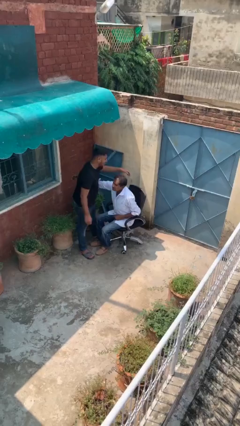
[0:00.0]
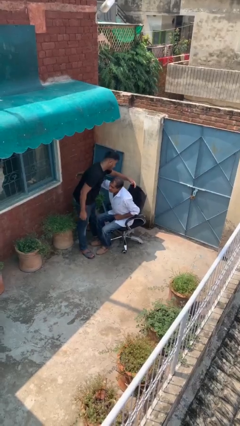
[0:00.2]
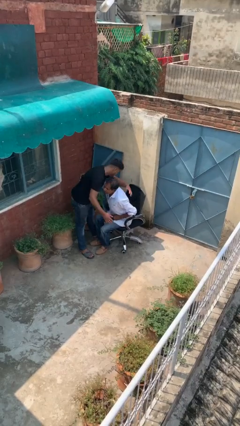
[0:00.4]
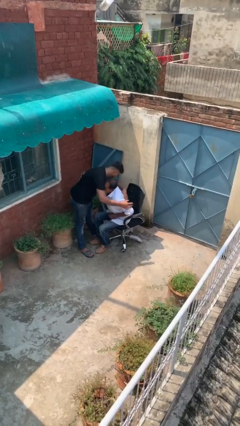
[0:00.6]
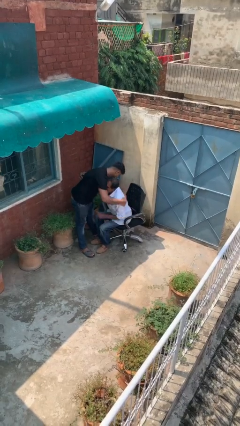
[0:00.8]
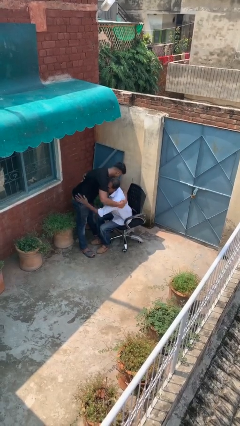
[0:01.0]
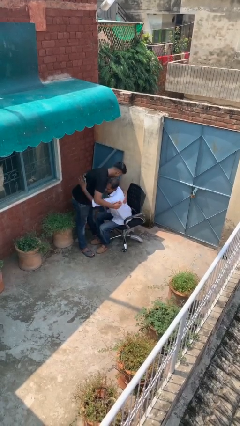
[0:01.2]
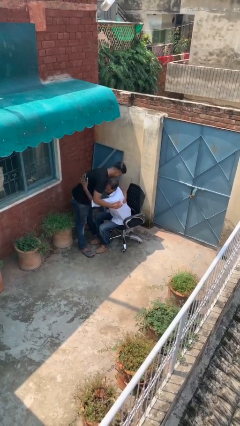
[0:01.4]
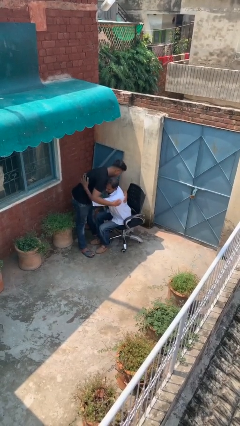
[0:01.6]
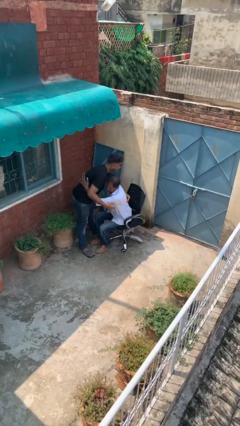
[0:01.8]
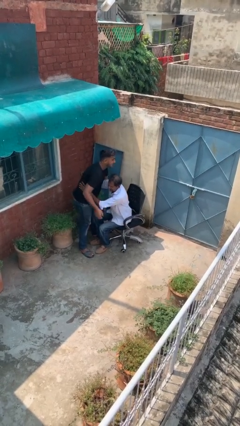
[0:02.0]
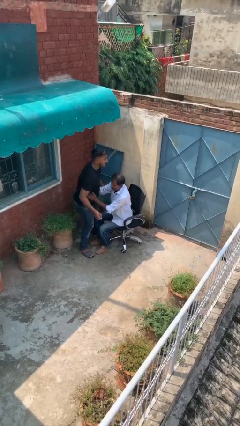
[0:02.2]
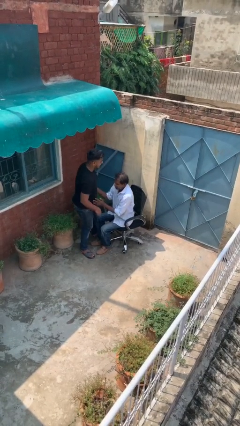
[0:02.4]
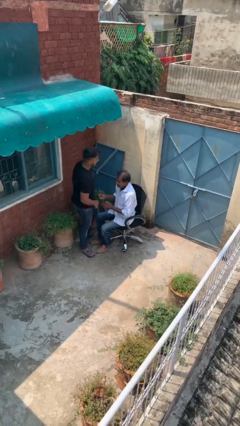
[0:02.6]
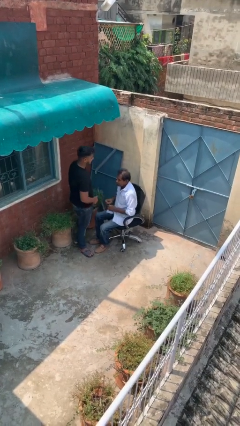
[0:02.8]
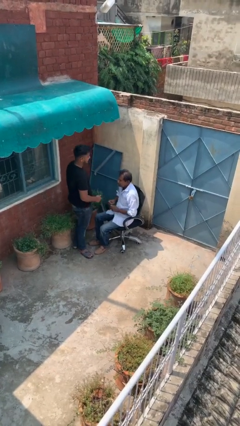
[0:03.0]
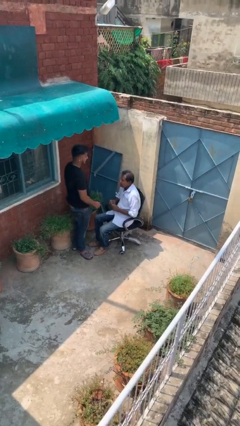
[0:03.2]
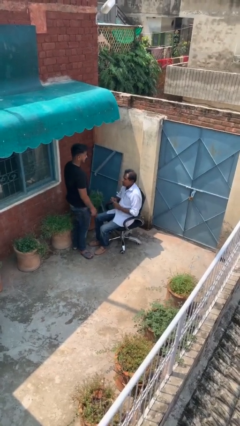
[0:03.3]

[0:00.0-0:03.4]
person embraces person

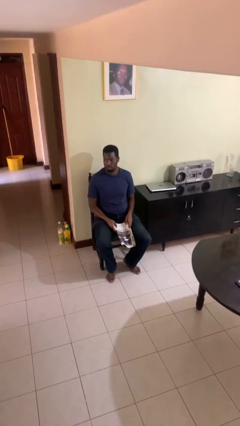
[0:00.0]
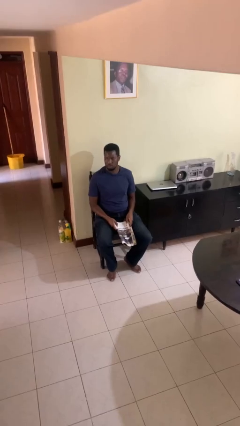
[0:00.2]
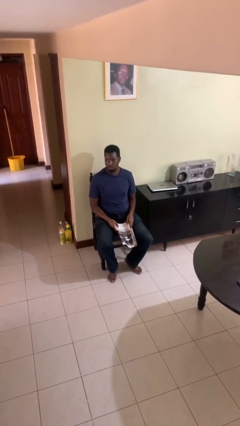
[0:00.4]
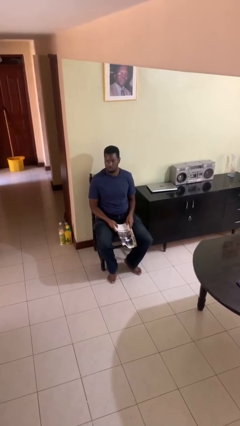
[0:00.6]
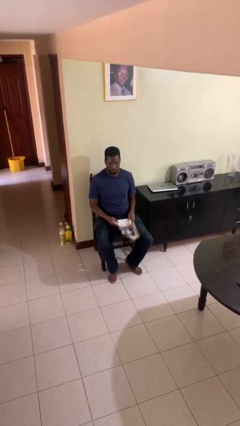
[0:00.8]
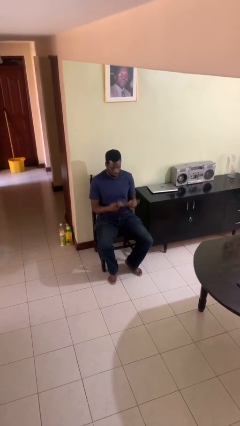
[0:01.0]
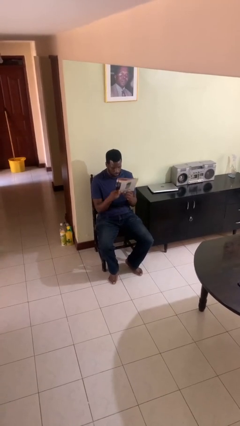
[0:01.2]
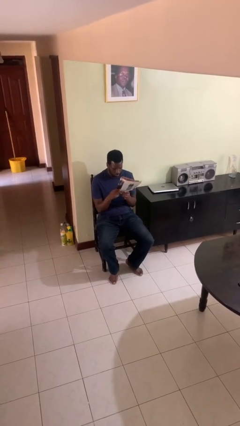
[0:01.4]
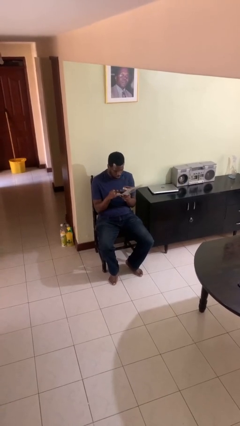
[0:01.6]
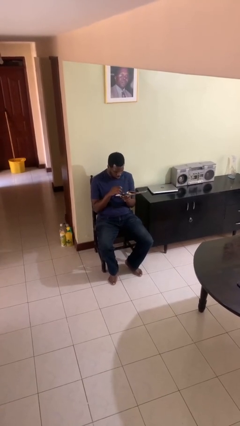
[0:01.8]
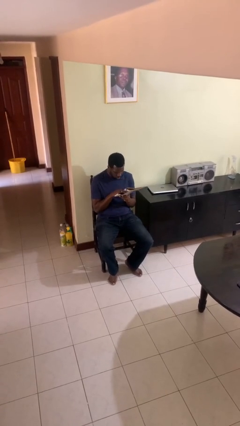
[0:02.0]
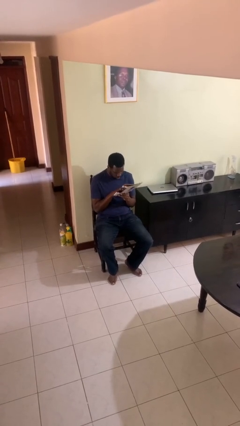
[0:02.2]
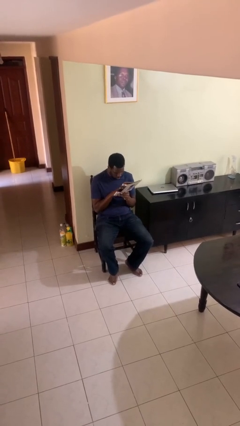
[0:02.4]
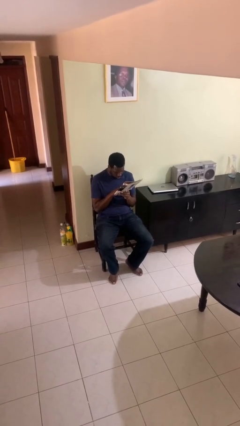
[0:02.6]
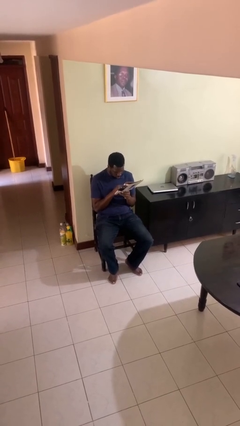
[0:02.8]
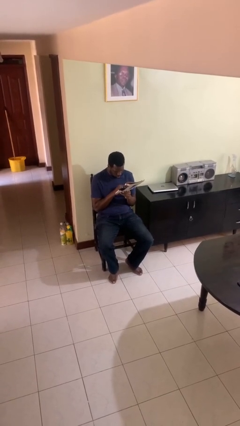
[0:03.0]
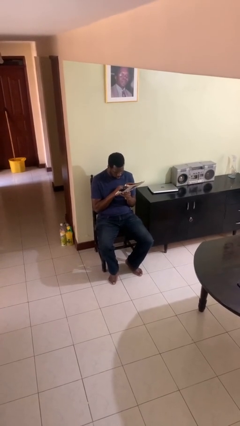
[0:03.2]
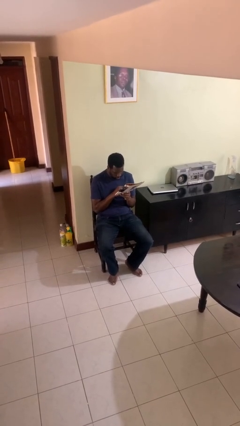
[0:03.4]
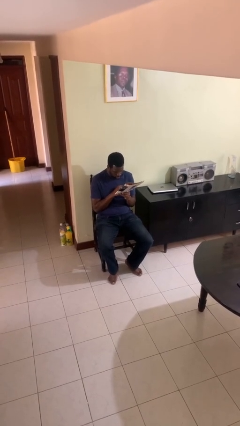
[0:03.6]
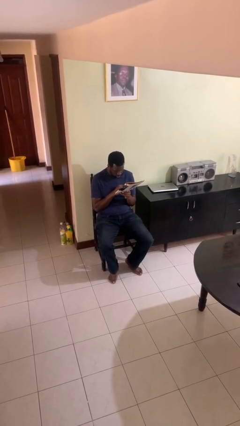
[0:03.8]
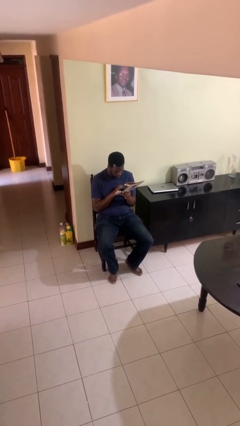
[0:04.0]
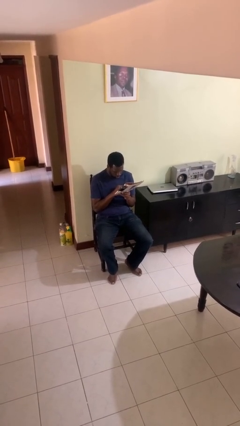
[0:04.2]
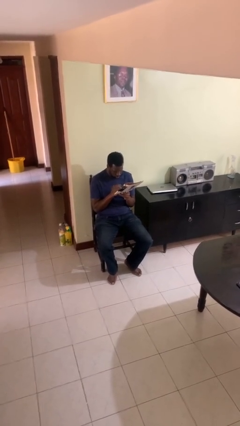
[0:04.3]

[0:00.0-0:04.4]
person reads document

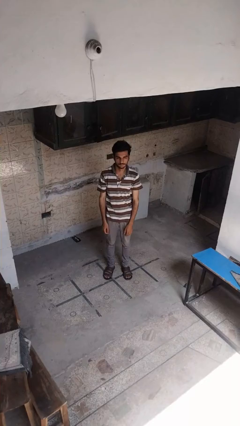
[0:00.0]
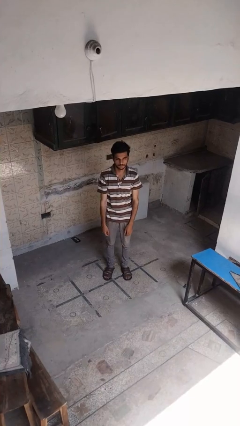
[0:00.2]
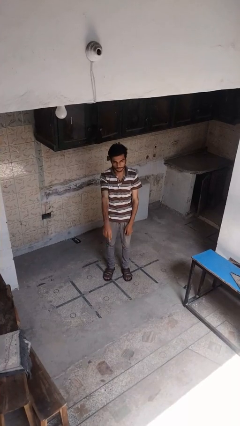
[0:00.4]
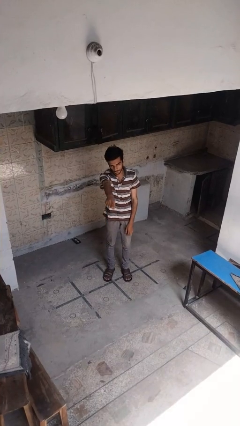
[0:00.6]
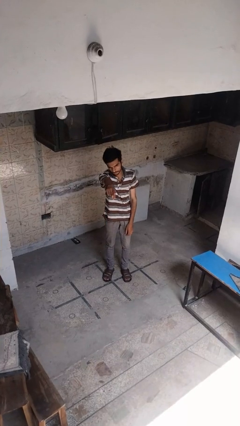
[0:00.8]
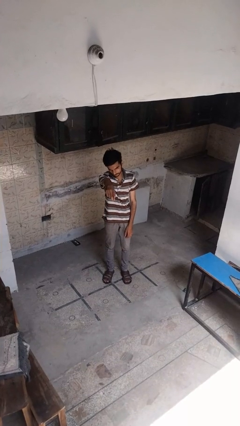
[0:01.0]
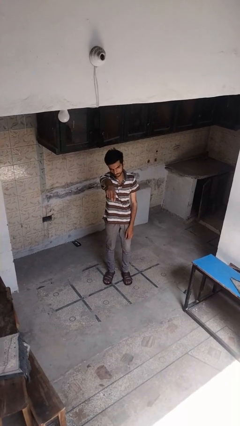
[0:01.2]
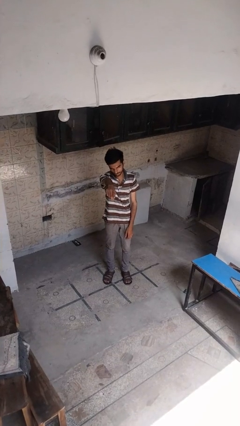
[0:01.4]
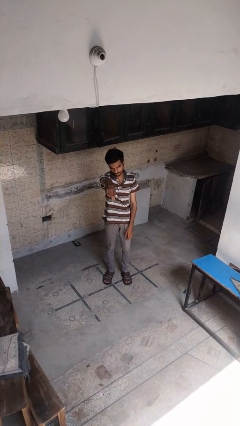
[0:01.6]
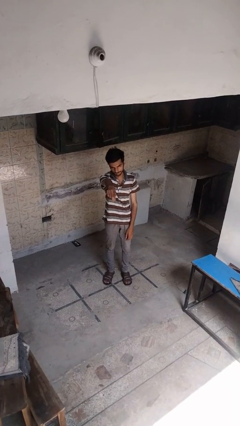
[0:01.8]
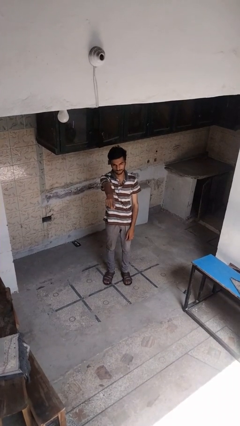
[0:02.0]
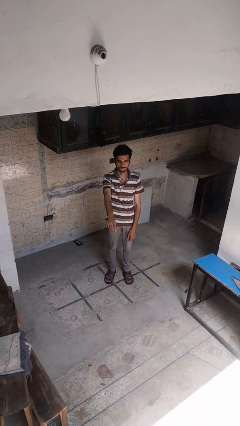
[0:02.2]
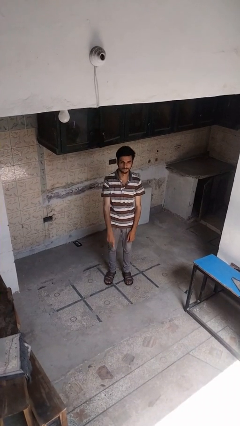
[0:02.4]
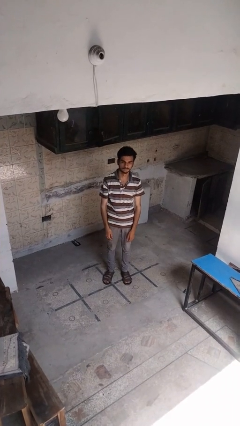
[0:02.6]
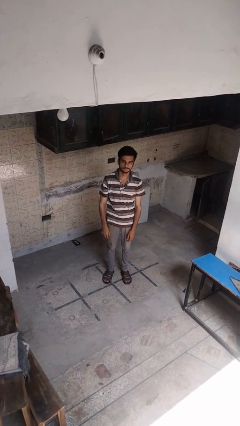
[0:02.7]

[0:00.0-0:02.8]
person points at person

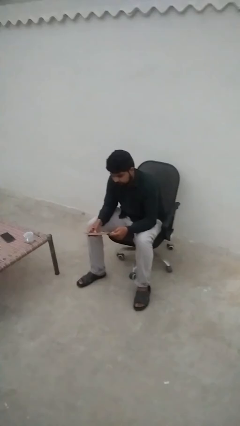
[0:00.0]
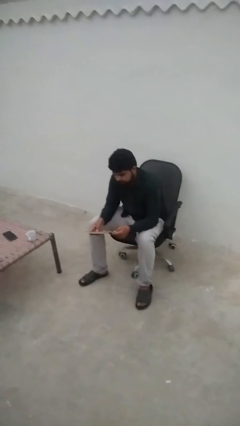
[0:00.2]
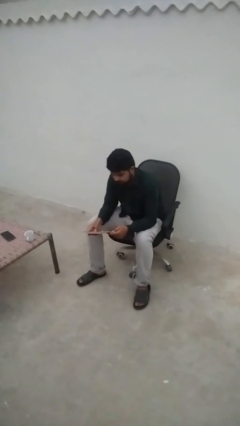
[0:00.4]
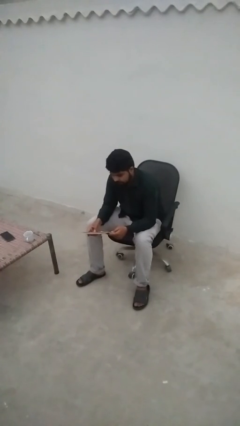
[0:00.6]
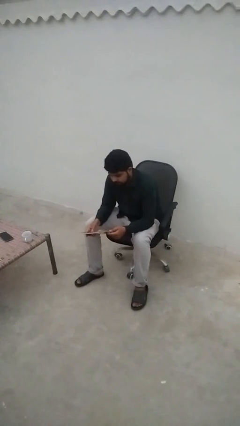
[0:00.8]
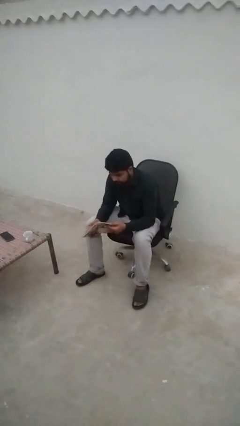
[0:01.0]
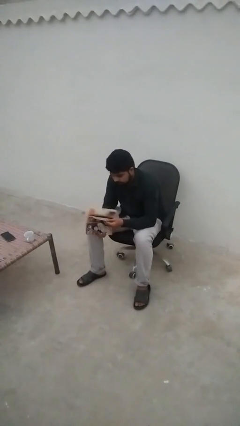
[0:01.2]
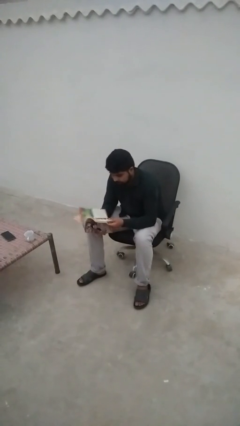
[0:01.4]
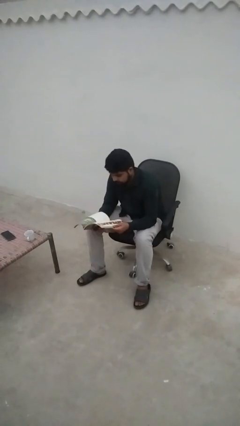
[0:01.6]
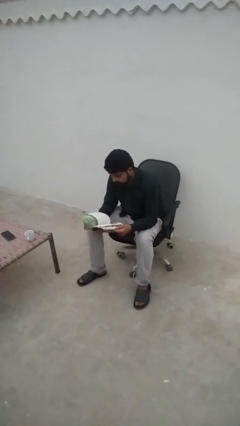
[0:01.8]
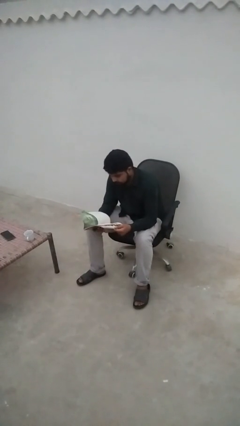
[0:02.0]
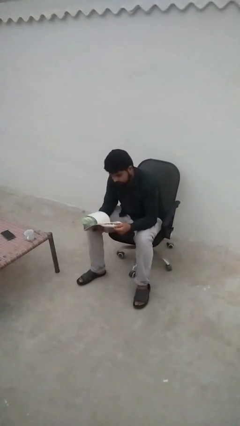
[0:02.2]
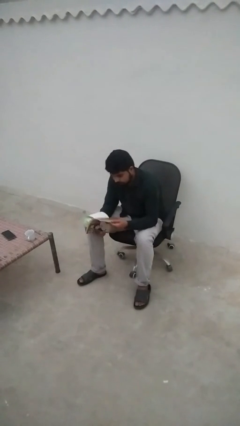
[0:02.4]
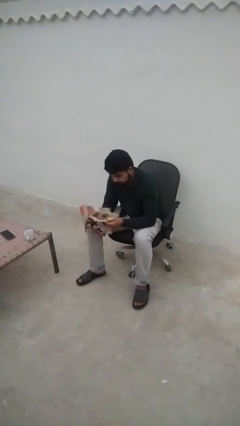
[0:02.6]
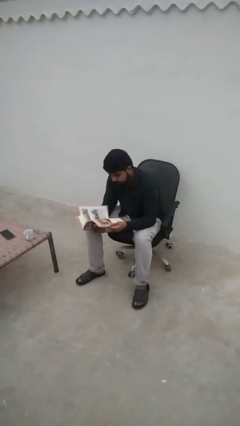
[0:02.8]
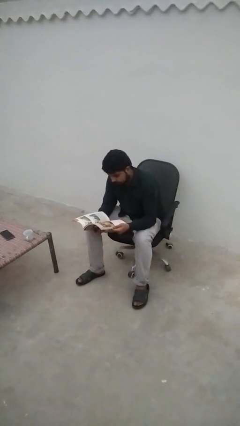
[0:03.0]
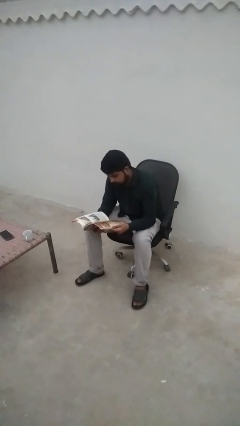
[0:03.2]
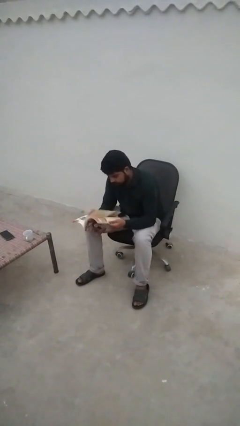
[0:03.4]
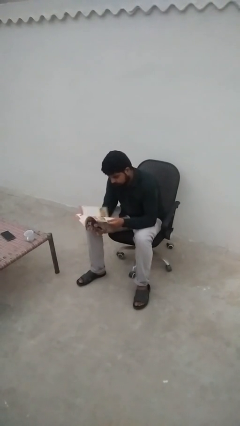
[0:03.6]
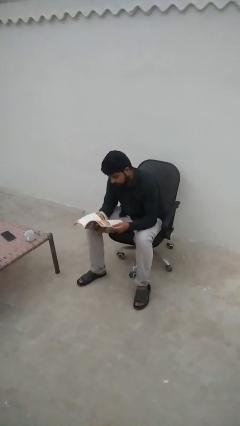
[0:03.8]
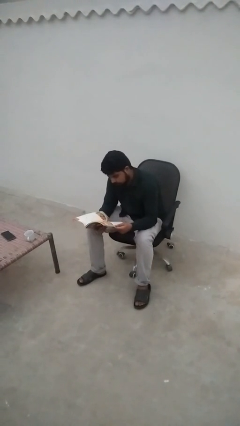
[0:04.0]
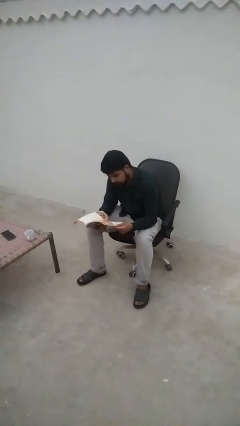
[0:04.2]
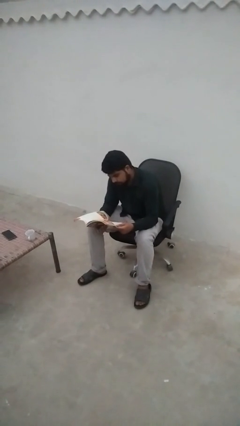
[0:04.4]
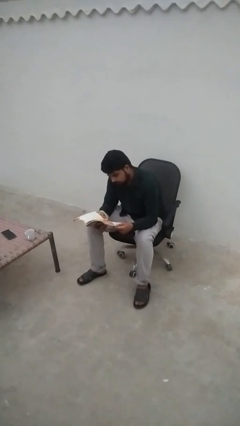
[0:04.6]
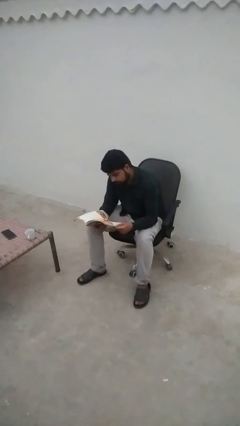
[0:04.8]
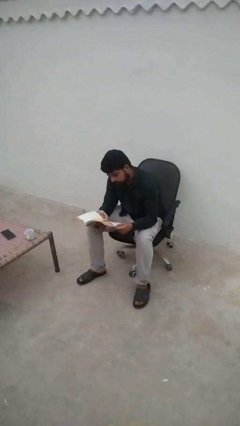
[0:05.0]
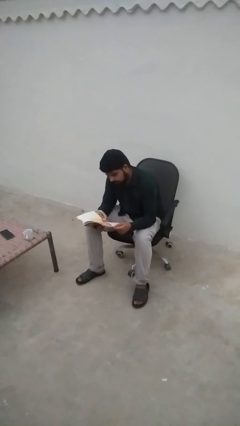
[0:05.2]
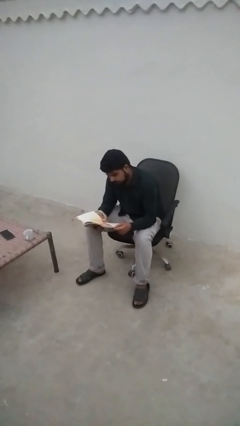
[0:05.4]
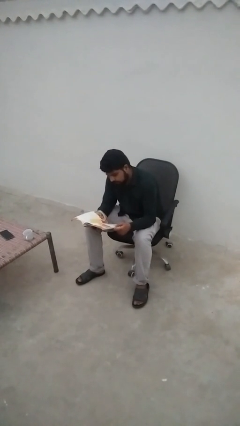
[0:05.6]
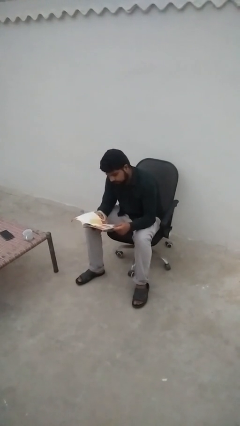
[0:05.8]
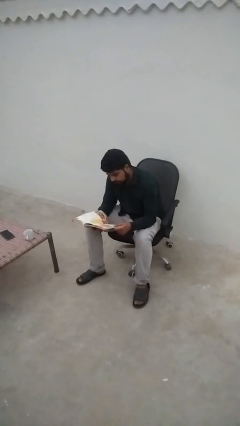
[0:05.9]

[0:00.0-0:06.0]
person reads magazine

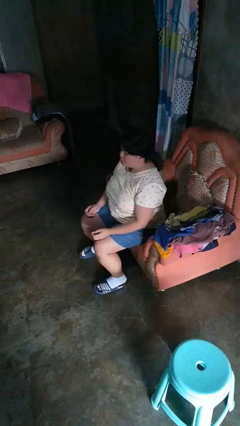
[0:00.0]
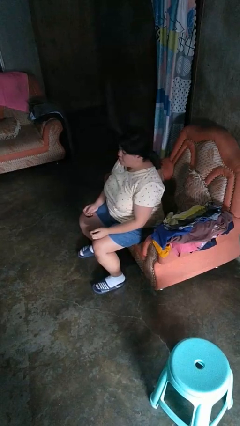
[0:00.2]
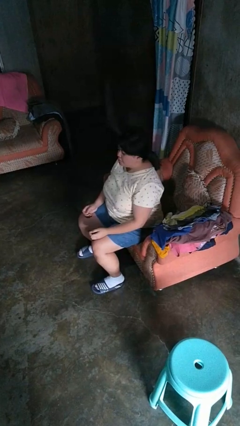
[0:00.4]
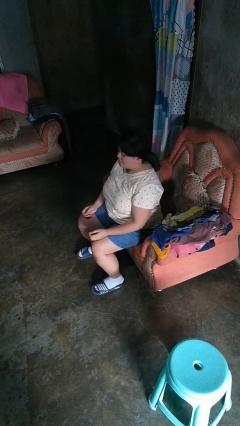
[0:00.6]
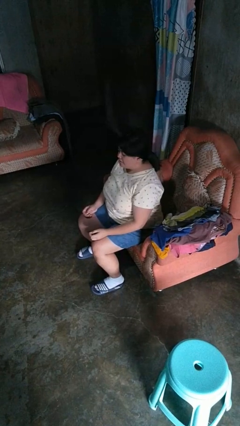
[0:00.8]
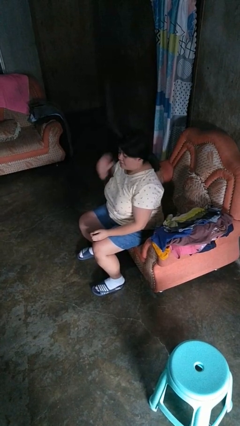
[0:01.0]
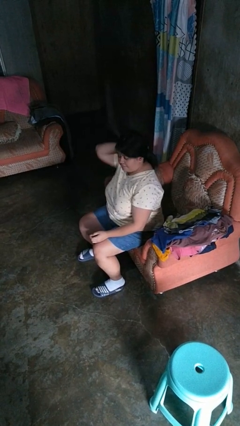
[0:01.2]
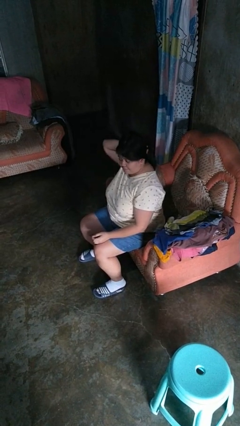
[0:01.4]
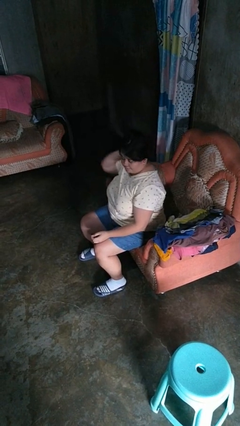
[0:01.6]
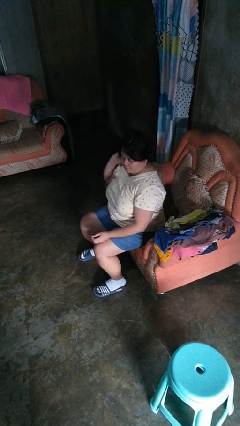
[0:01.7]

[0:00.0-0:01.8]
person takes off hairtie
